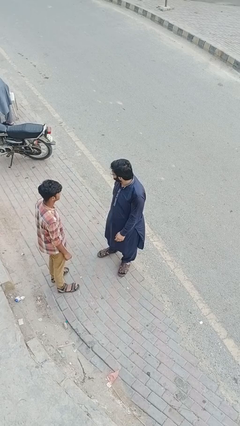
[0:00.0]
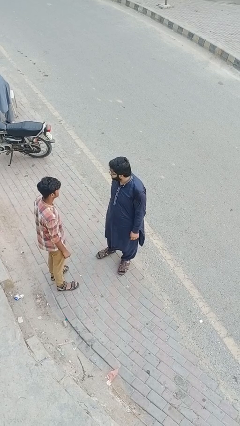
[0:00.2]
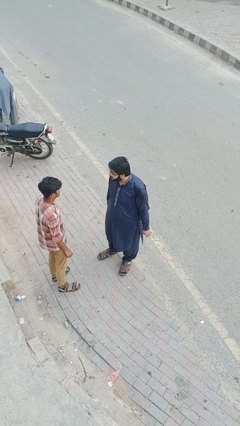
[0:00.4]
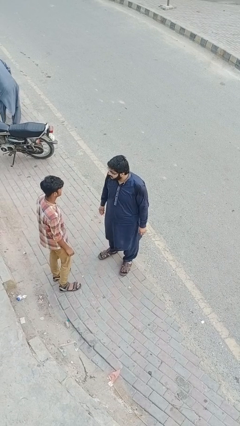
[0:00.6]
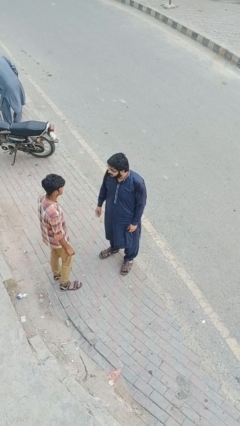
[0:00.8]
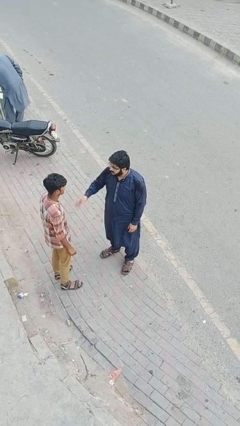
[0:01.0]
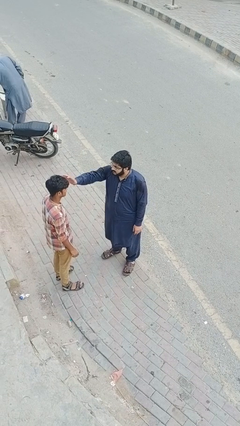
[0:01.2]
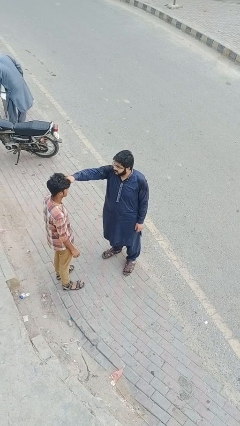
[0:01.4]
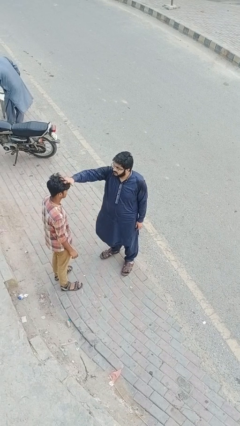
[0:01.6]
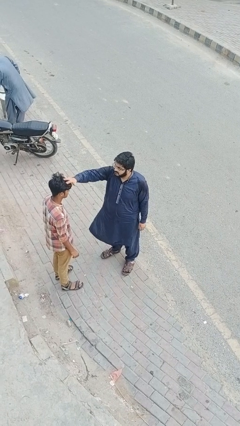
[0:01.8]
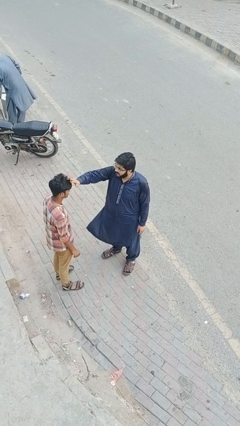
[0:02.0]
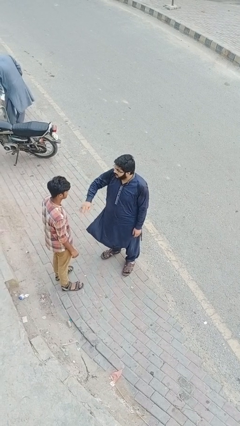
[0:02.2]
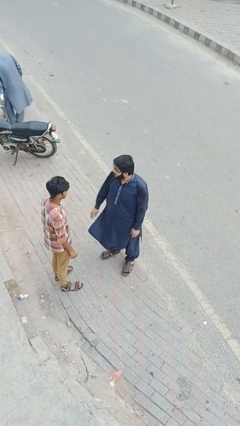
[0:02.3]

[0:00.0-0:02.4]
person grabs person by hair

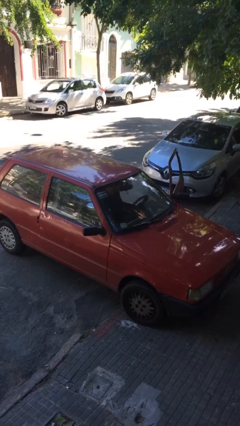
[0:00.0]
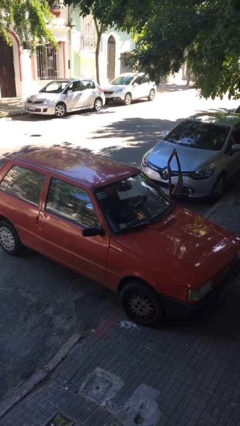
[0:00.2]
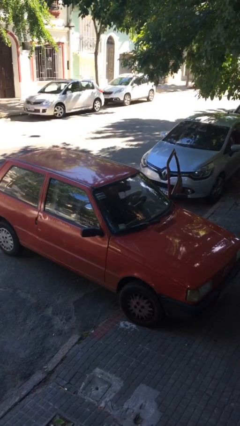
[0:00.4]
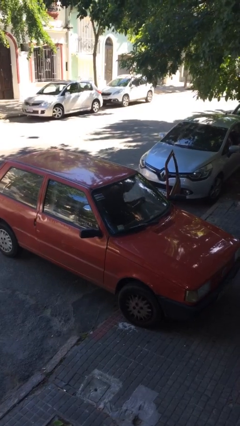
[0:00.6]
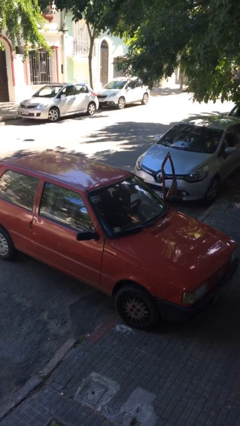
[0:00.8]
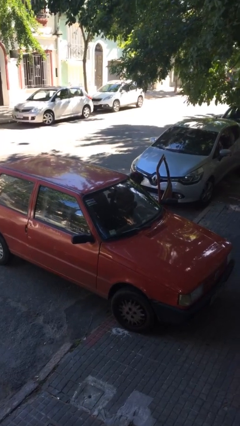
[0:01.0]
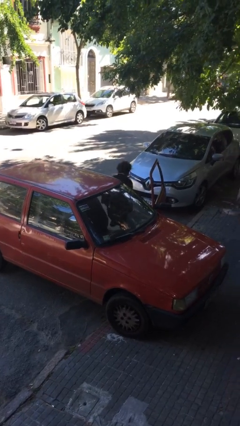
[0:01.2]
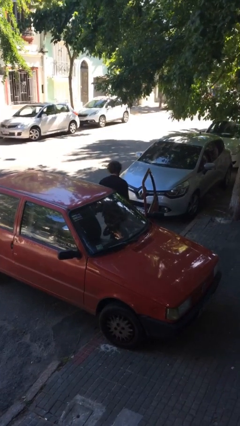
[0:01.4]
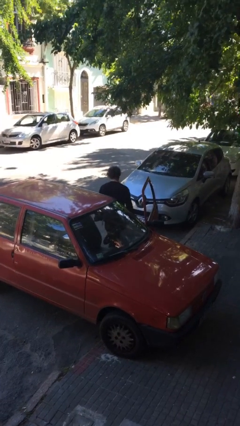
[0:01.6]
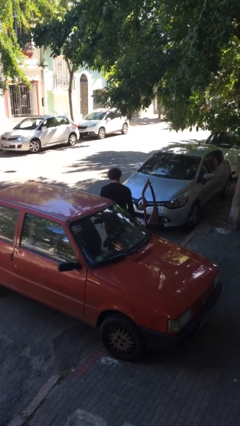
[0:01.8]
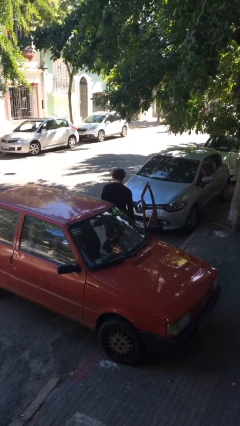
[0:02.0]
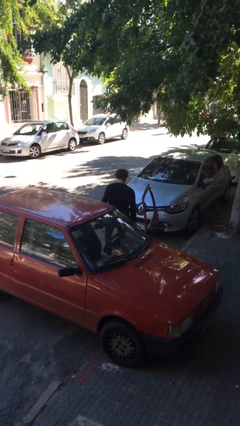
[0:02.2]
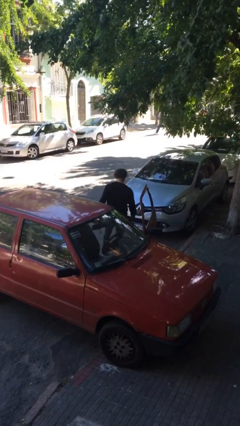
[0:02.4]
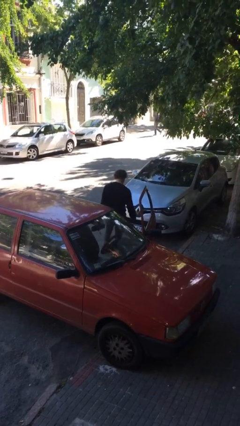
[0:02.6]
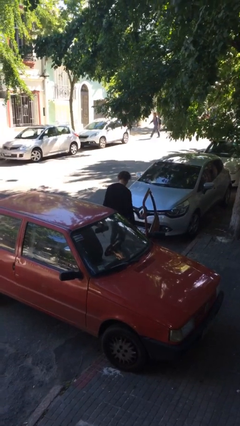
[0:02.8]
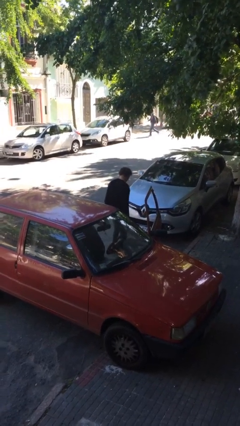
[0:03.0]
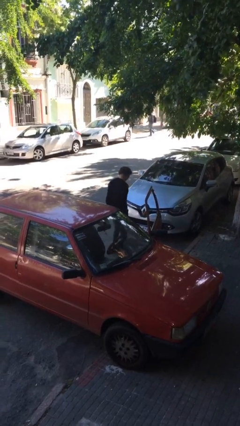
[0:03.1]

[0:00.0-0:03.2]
person exits car

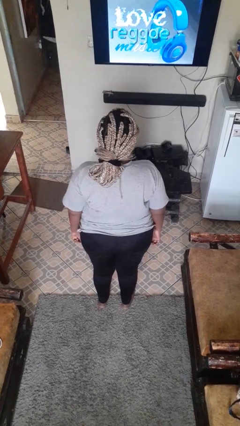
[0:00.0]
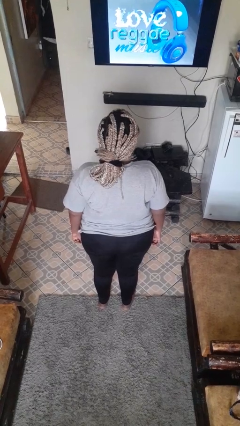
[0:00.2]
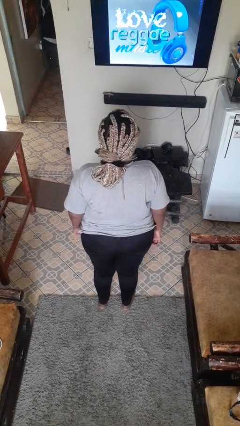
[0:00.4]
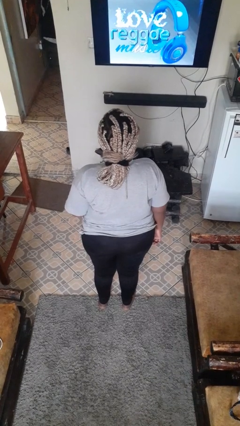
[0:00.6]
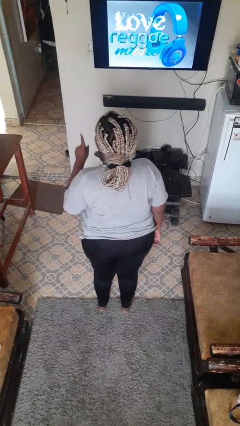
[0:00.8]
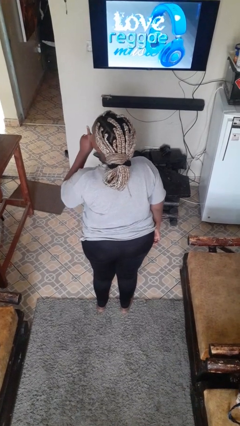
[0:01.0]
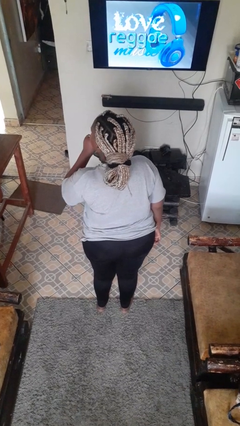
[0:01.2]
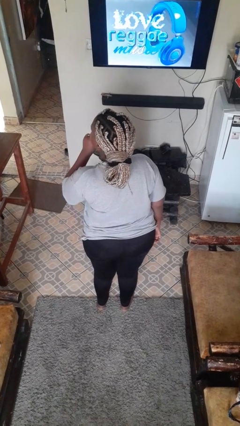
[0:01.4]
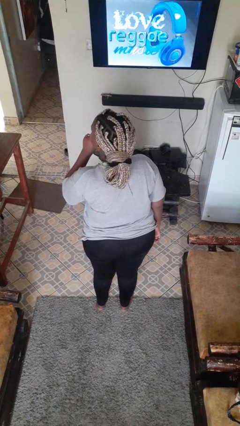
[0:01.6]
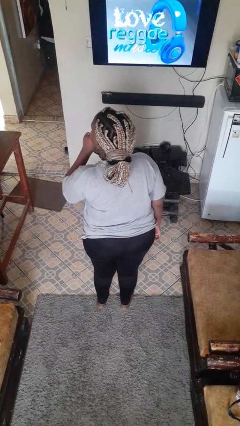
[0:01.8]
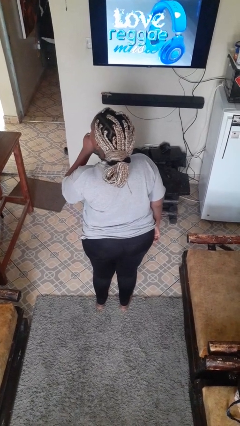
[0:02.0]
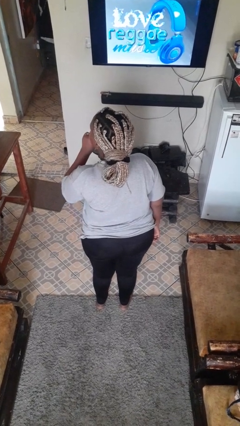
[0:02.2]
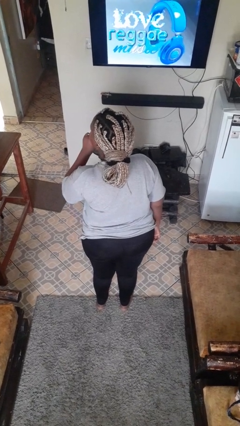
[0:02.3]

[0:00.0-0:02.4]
person gestures be quiet

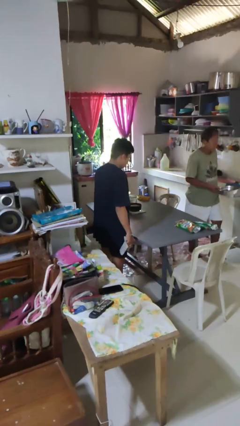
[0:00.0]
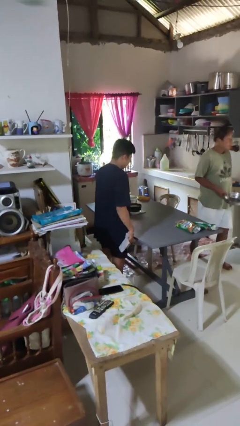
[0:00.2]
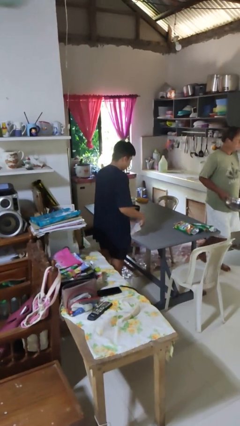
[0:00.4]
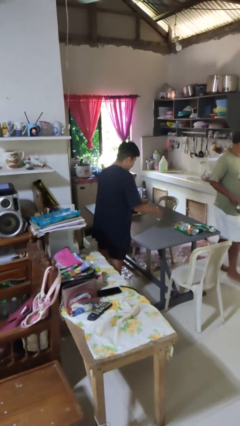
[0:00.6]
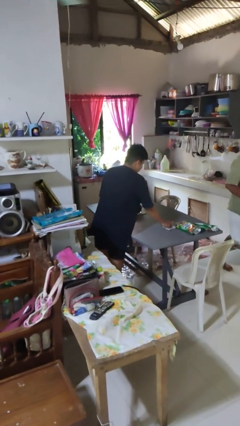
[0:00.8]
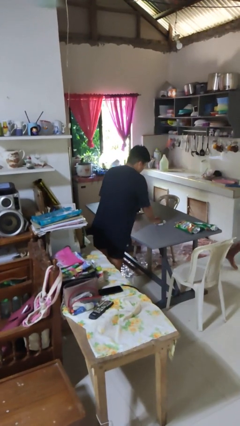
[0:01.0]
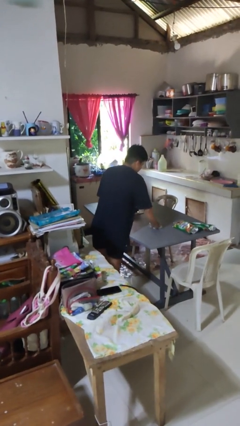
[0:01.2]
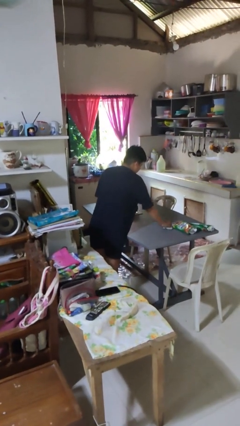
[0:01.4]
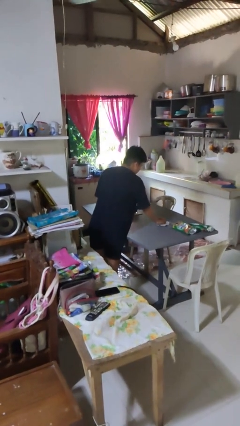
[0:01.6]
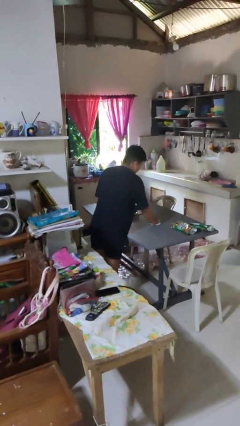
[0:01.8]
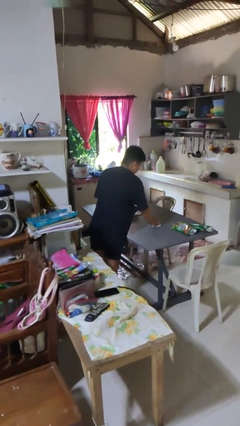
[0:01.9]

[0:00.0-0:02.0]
person cleans table with rag

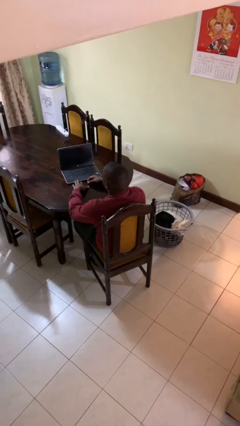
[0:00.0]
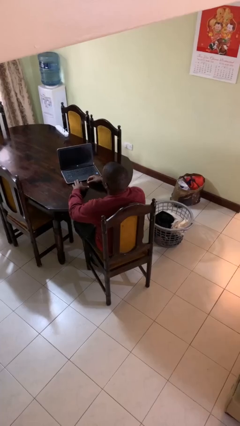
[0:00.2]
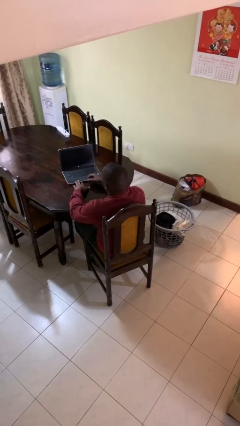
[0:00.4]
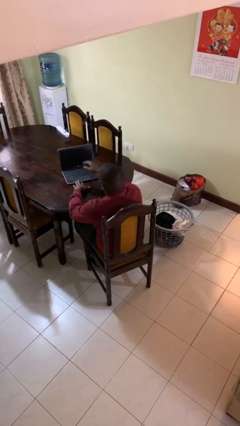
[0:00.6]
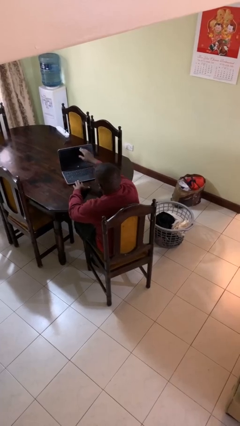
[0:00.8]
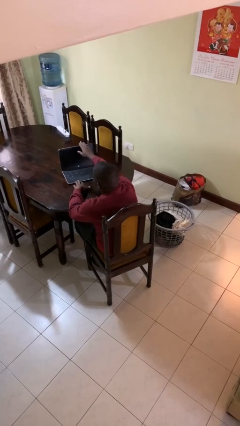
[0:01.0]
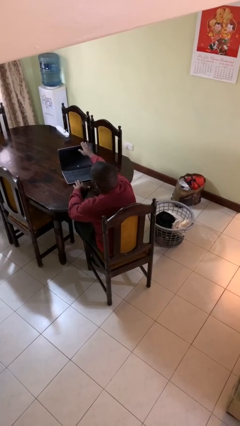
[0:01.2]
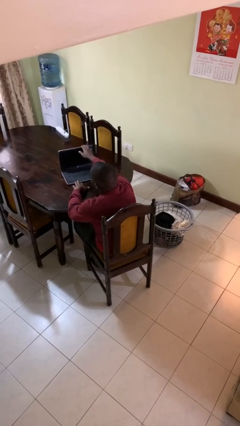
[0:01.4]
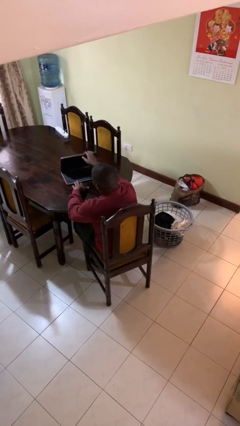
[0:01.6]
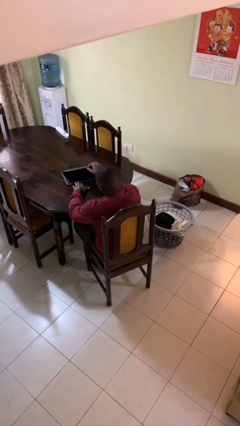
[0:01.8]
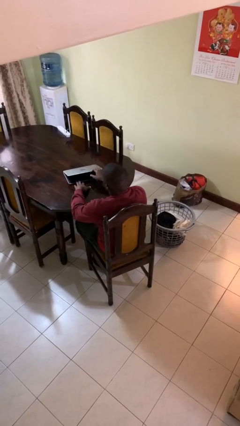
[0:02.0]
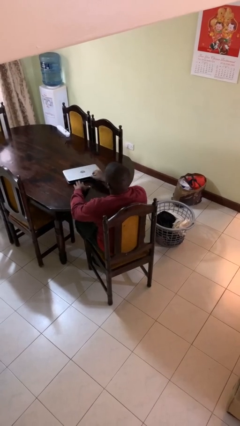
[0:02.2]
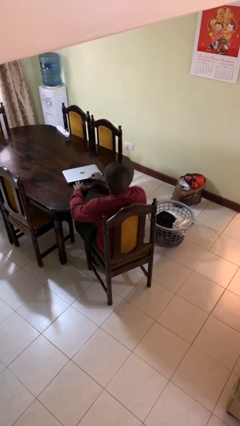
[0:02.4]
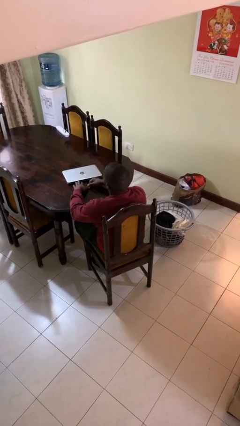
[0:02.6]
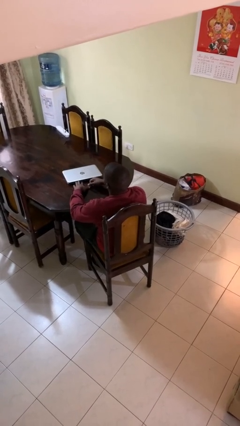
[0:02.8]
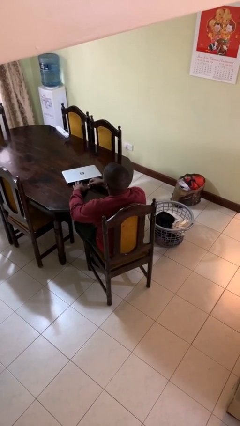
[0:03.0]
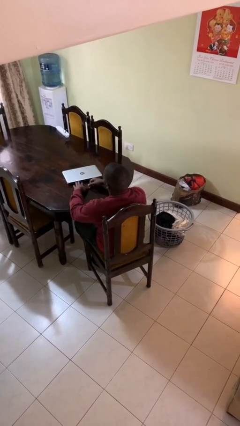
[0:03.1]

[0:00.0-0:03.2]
person closes laptop

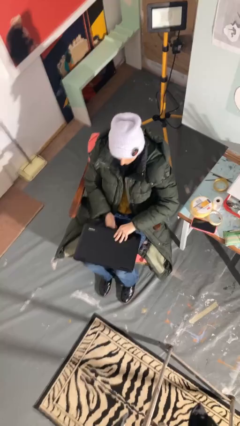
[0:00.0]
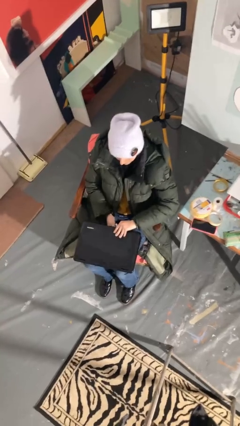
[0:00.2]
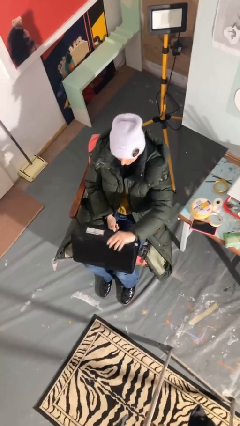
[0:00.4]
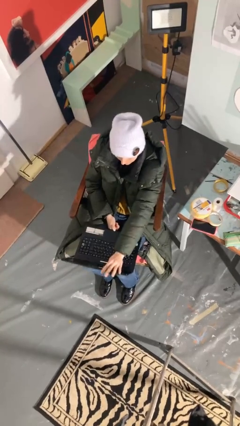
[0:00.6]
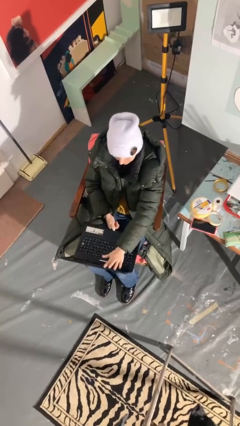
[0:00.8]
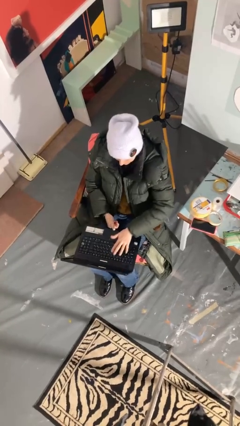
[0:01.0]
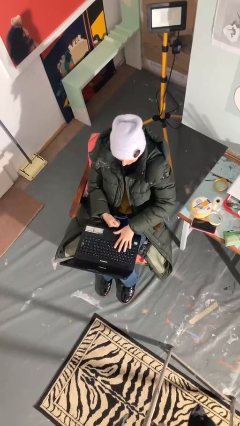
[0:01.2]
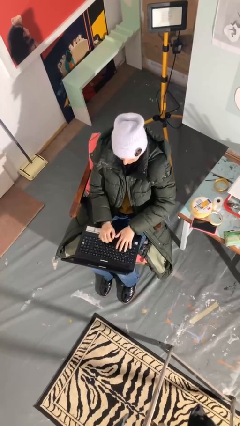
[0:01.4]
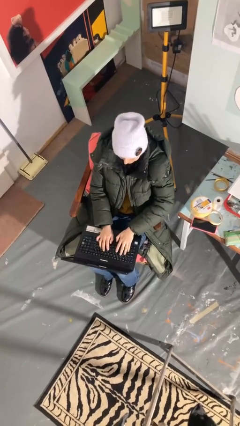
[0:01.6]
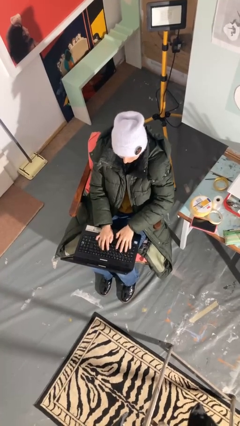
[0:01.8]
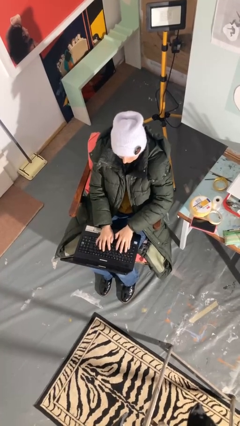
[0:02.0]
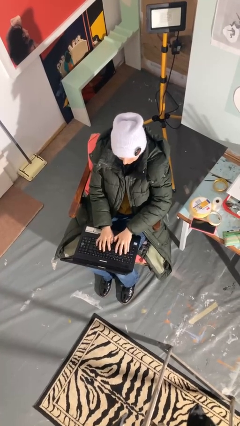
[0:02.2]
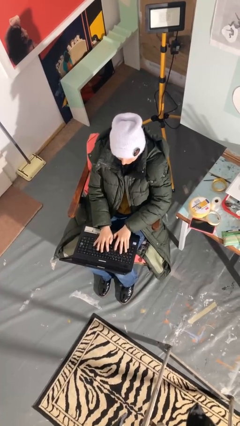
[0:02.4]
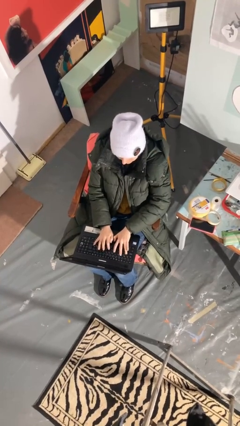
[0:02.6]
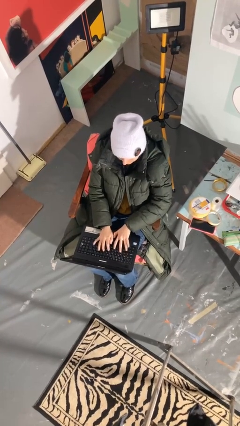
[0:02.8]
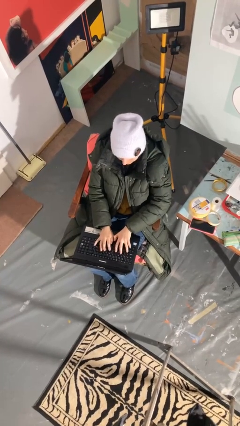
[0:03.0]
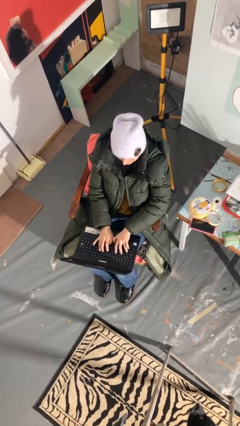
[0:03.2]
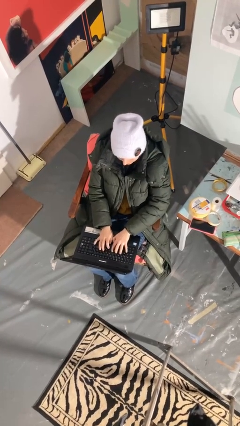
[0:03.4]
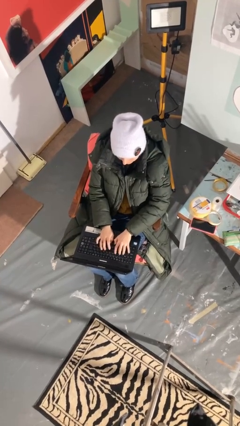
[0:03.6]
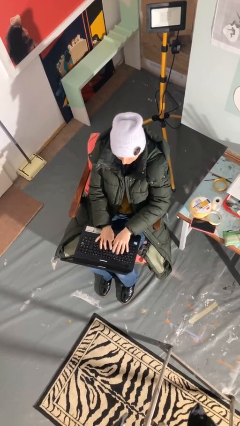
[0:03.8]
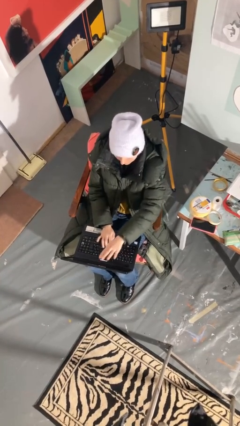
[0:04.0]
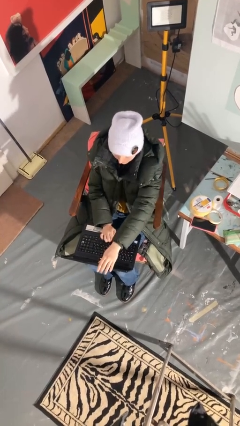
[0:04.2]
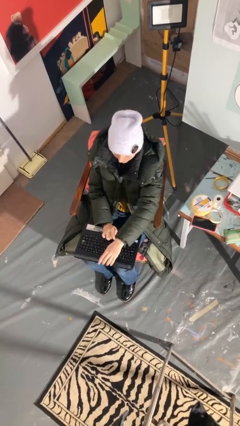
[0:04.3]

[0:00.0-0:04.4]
person interacts with laptop
